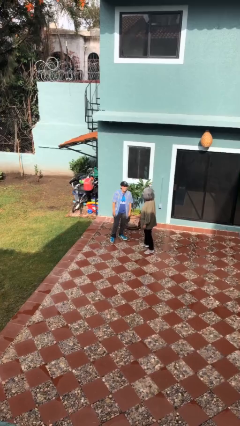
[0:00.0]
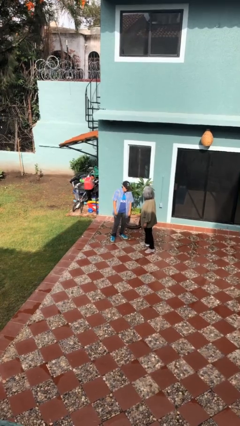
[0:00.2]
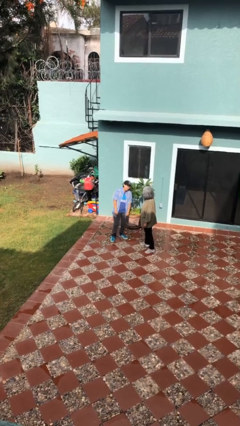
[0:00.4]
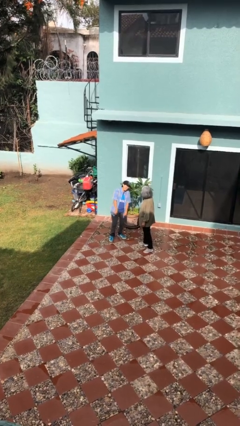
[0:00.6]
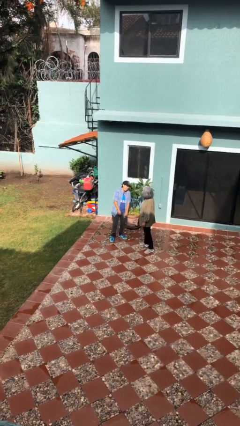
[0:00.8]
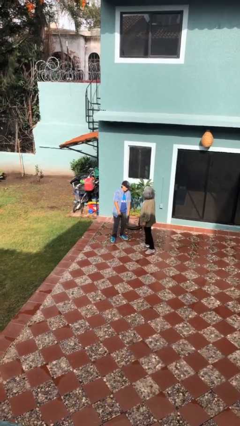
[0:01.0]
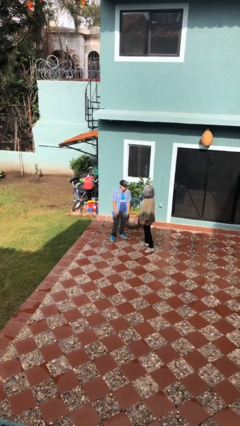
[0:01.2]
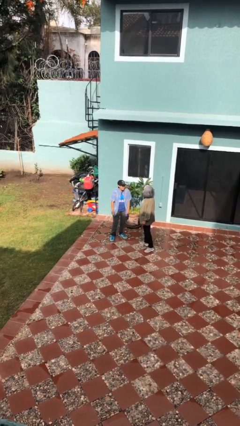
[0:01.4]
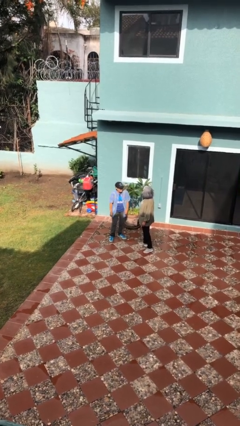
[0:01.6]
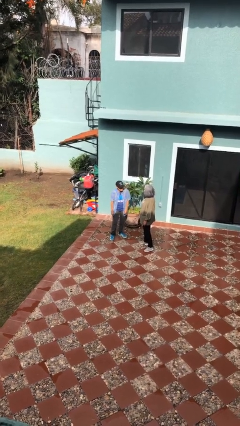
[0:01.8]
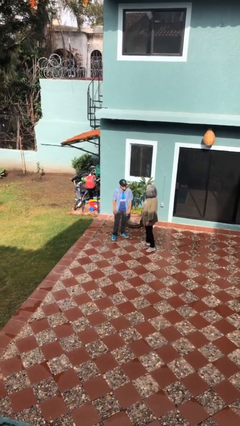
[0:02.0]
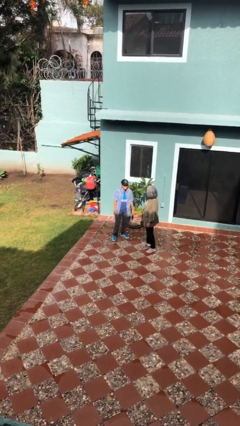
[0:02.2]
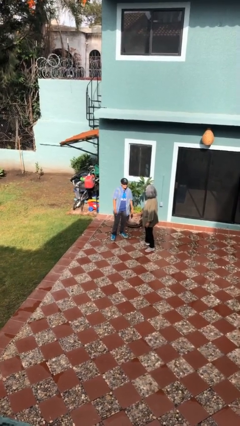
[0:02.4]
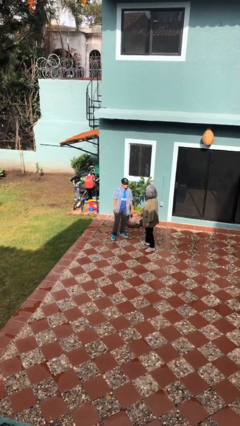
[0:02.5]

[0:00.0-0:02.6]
person laughs with person

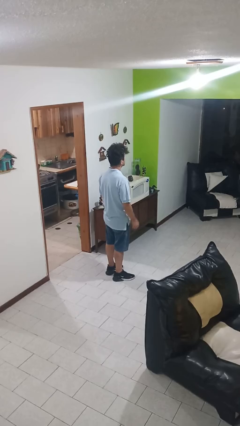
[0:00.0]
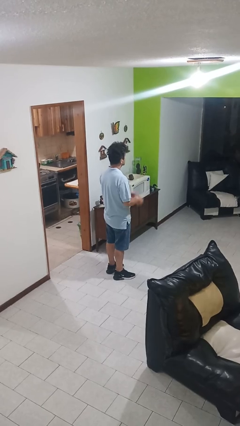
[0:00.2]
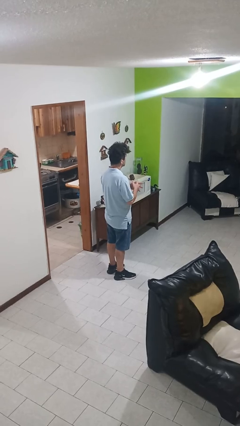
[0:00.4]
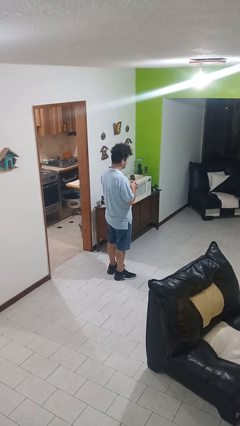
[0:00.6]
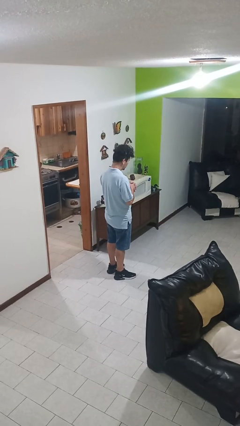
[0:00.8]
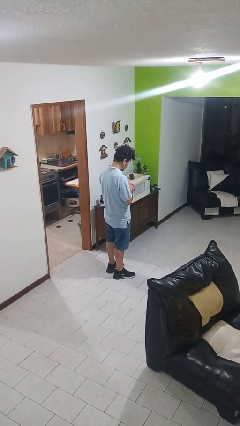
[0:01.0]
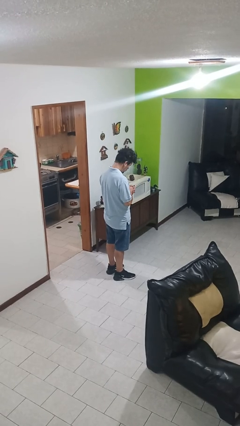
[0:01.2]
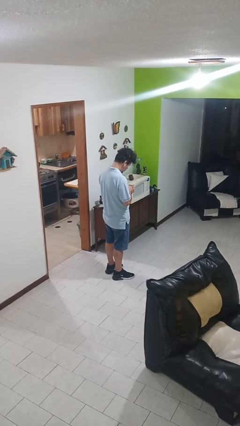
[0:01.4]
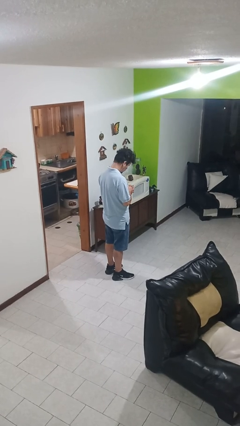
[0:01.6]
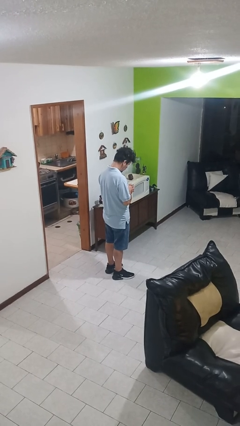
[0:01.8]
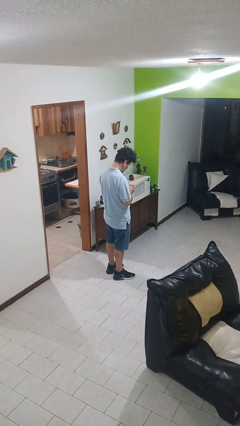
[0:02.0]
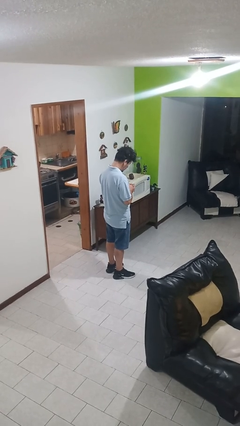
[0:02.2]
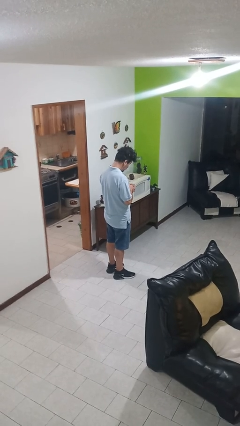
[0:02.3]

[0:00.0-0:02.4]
person prays

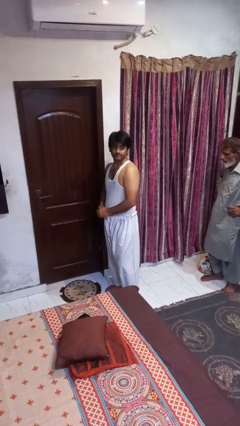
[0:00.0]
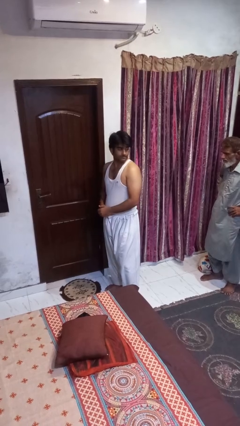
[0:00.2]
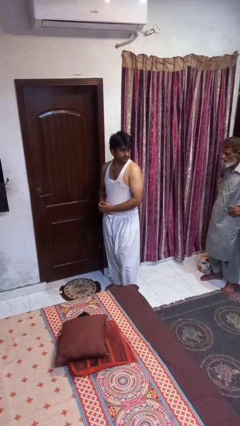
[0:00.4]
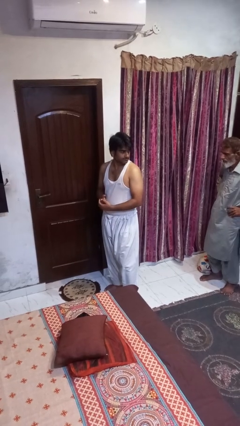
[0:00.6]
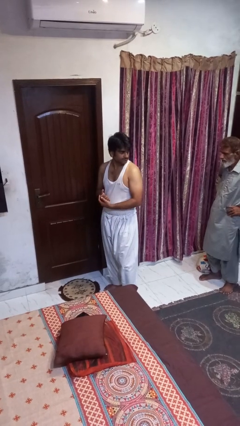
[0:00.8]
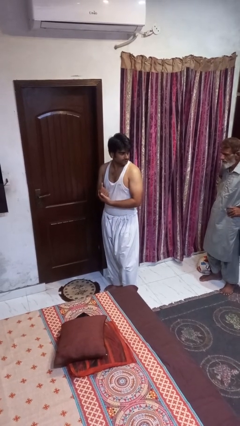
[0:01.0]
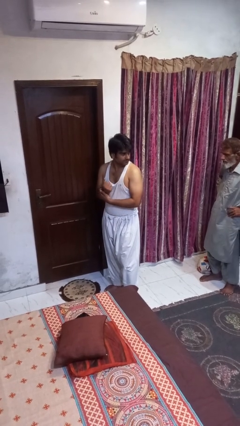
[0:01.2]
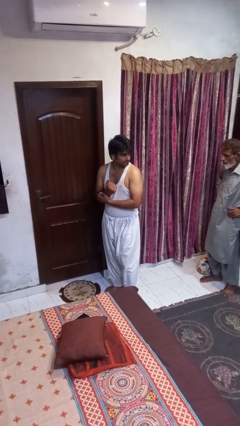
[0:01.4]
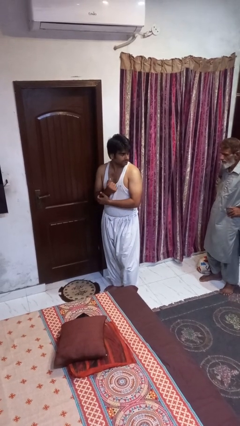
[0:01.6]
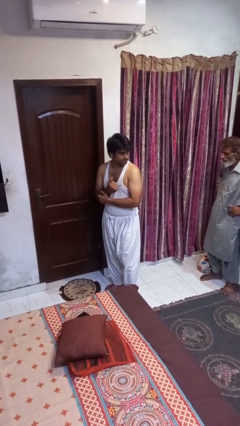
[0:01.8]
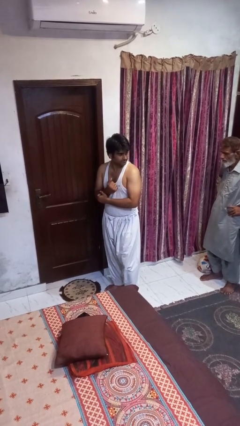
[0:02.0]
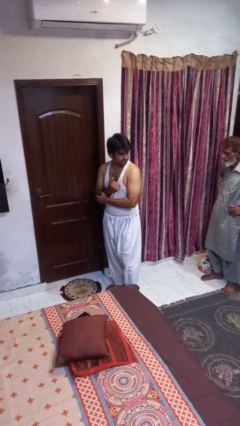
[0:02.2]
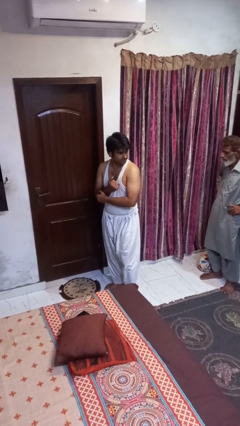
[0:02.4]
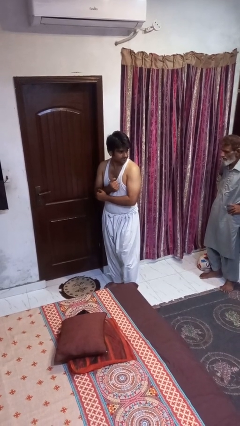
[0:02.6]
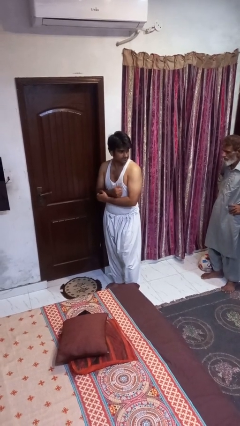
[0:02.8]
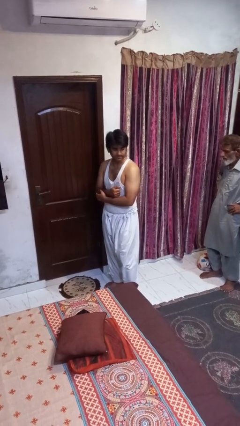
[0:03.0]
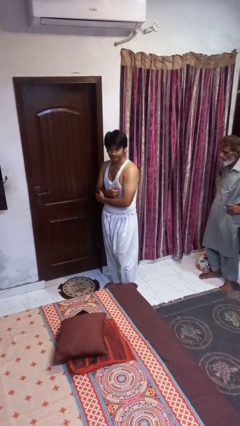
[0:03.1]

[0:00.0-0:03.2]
person looks over shoulder

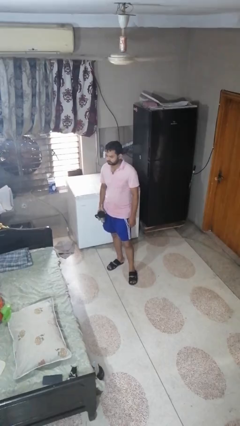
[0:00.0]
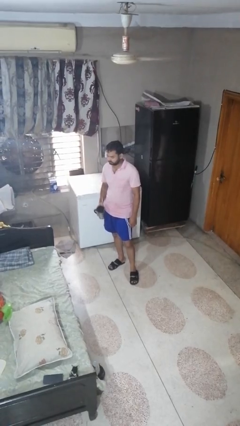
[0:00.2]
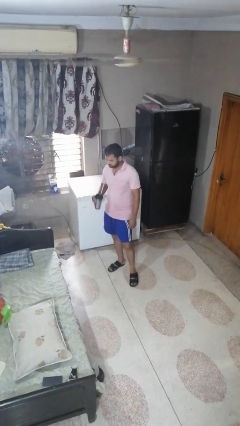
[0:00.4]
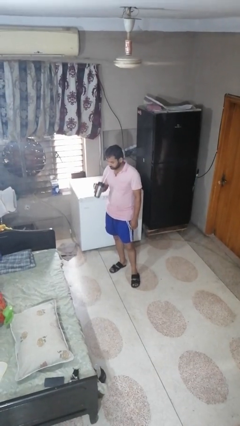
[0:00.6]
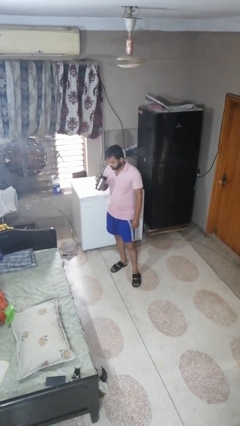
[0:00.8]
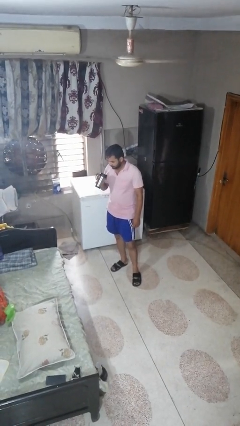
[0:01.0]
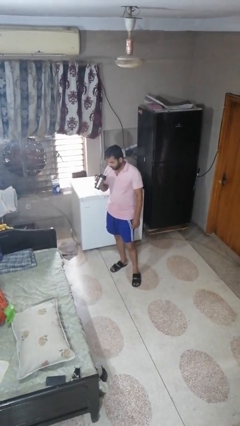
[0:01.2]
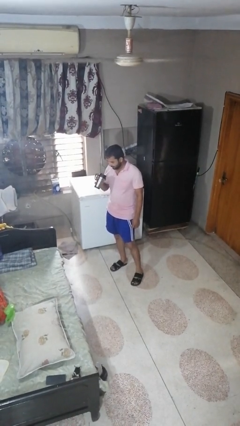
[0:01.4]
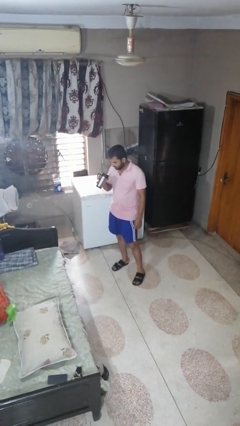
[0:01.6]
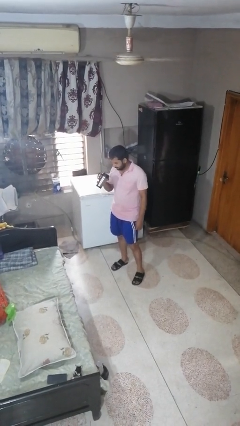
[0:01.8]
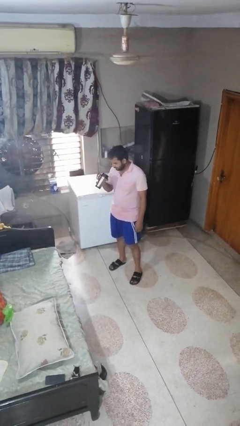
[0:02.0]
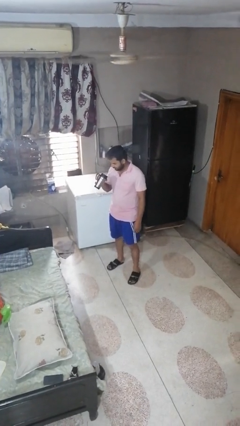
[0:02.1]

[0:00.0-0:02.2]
person drinks from straw

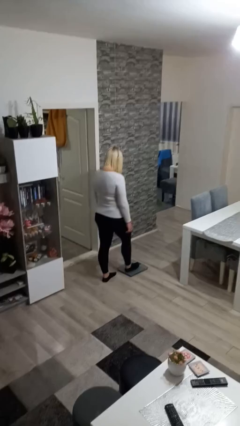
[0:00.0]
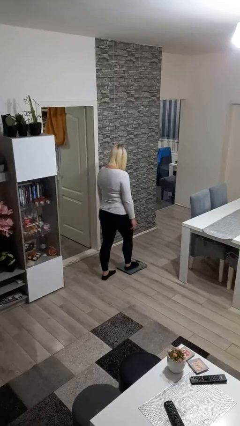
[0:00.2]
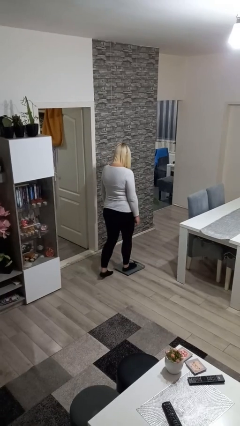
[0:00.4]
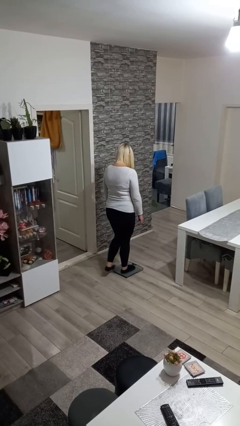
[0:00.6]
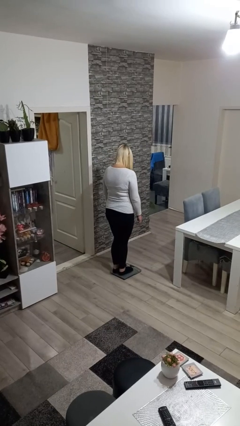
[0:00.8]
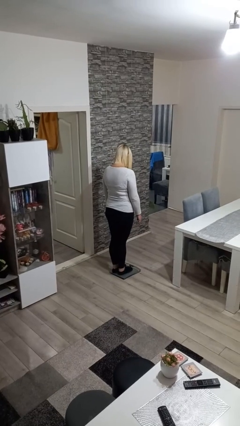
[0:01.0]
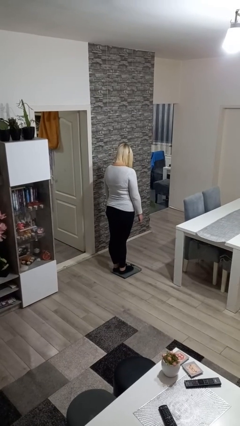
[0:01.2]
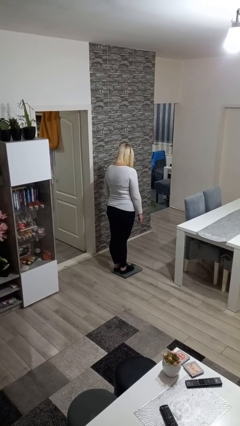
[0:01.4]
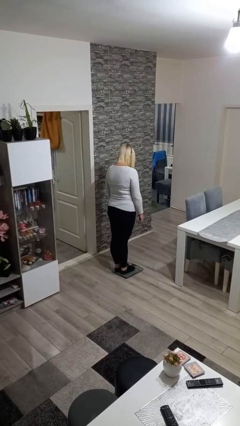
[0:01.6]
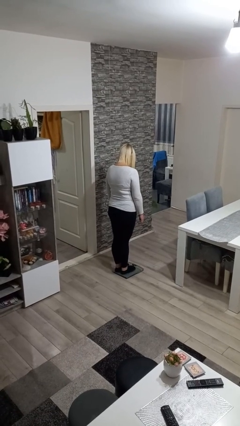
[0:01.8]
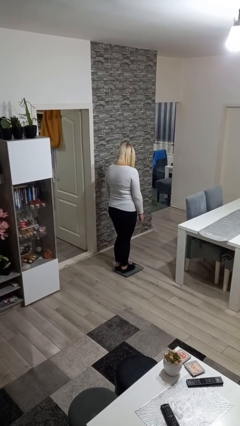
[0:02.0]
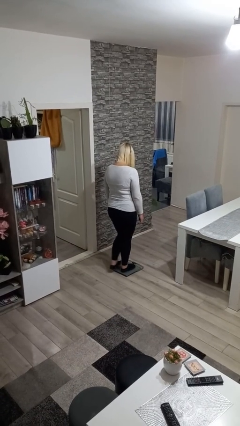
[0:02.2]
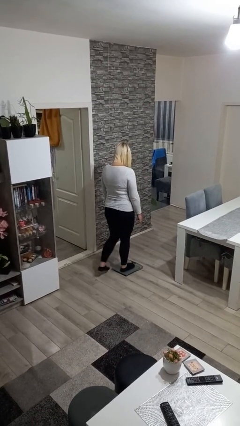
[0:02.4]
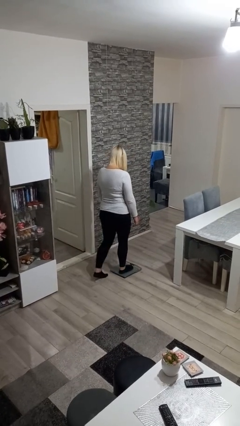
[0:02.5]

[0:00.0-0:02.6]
person uses bodyweight scale

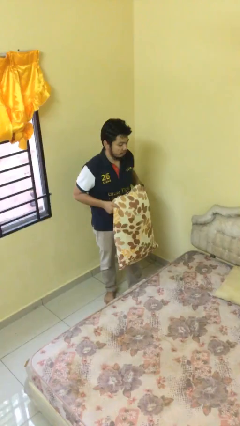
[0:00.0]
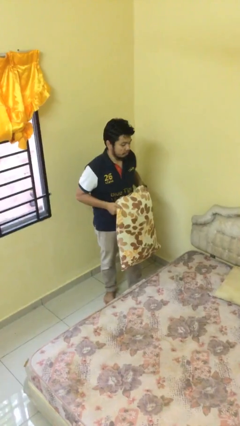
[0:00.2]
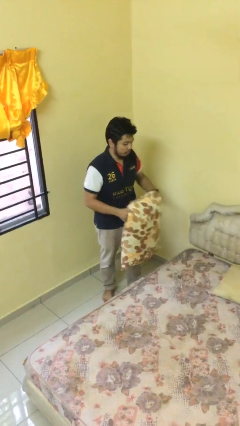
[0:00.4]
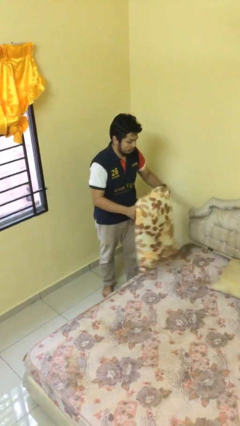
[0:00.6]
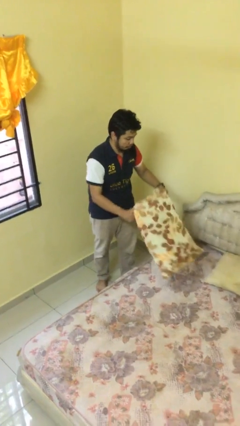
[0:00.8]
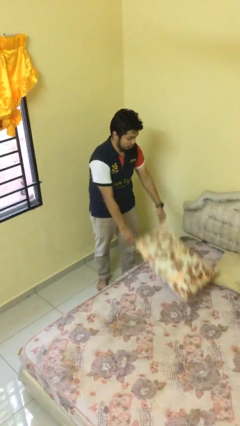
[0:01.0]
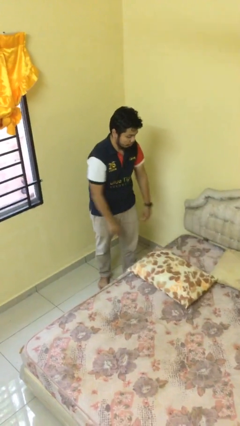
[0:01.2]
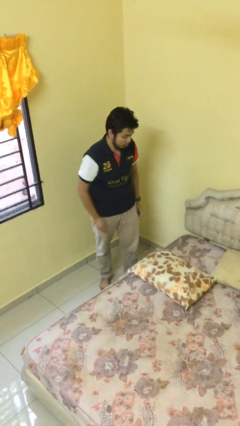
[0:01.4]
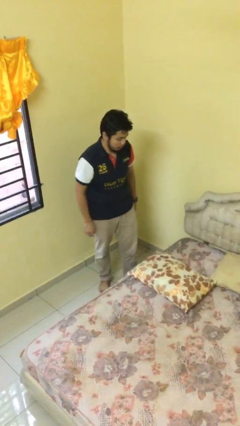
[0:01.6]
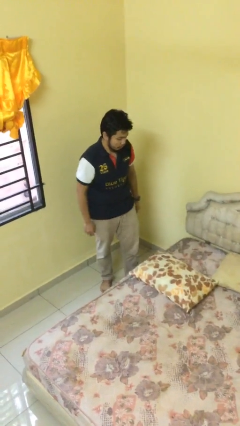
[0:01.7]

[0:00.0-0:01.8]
person puts down object on bed

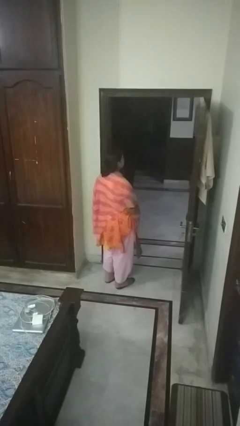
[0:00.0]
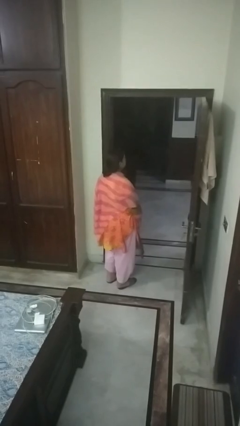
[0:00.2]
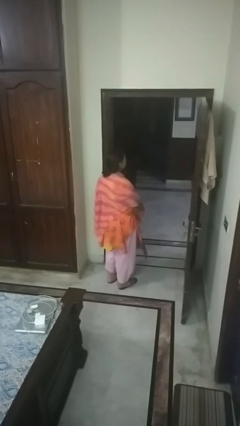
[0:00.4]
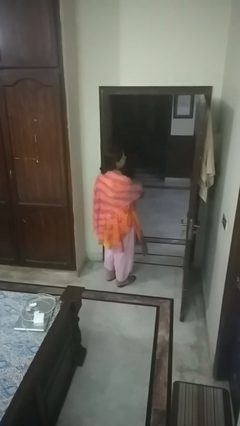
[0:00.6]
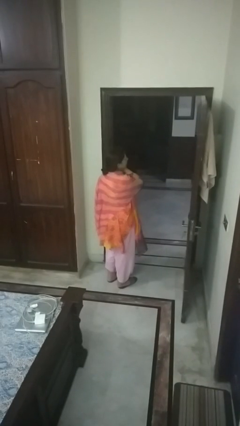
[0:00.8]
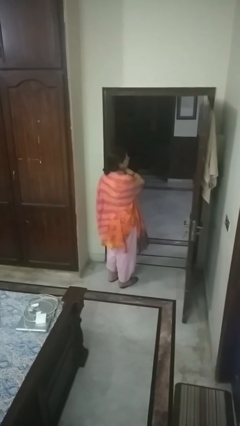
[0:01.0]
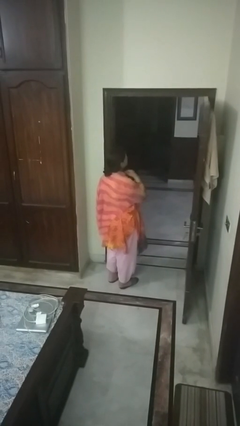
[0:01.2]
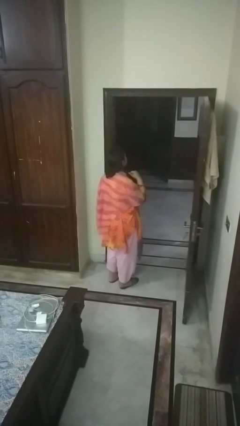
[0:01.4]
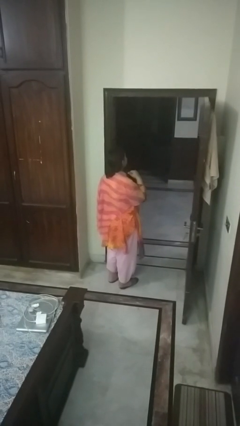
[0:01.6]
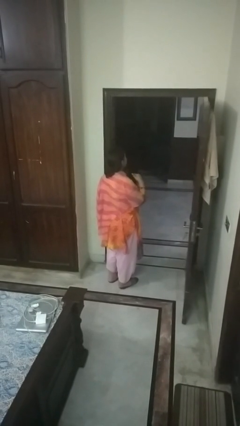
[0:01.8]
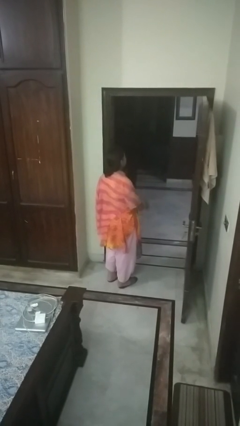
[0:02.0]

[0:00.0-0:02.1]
person gestures cut

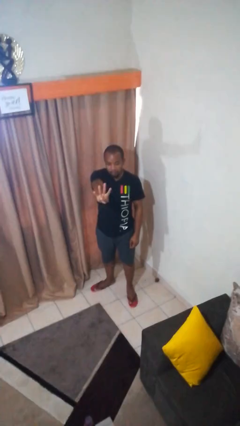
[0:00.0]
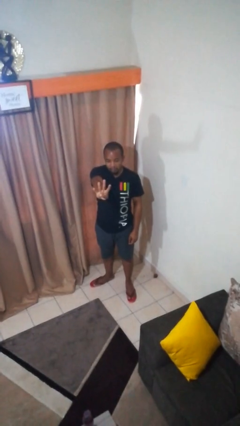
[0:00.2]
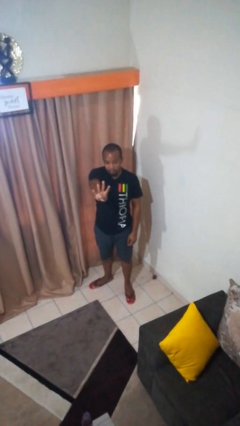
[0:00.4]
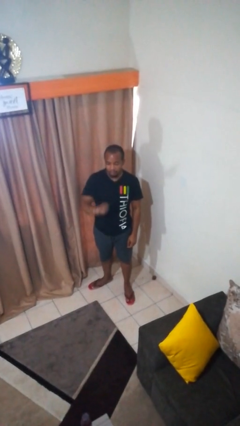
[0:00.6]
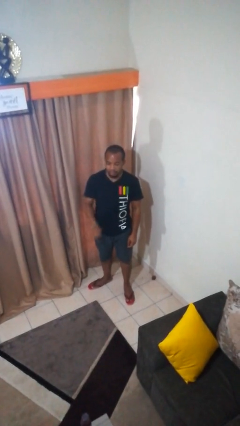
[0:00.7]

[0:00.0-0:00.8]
person gestures number four
